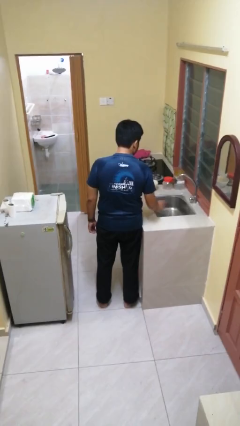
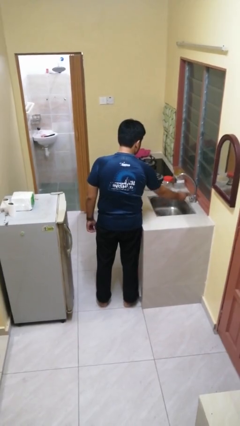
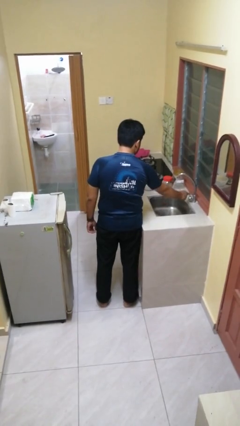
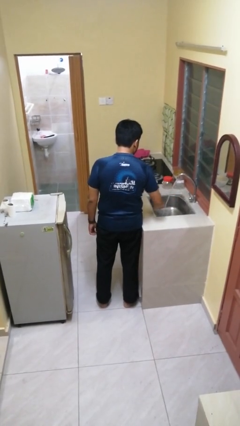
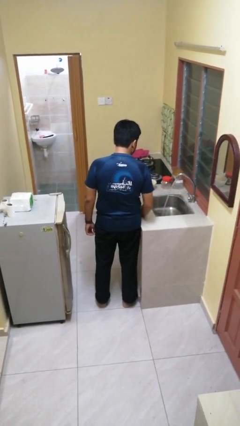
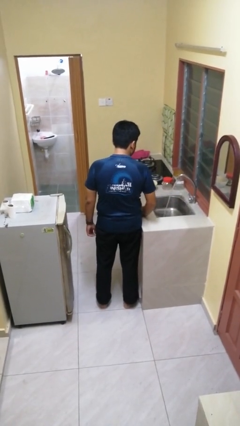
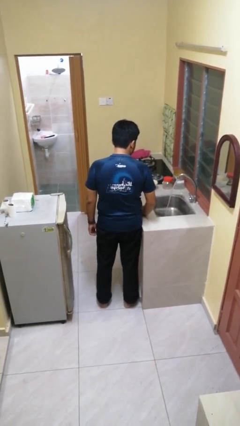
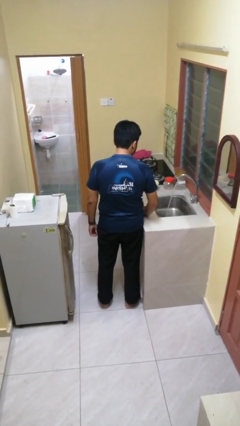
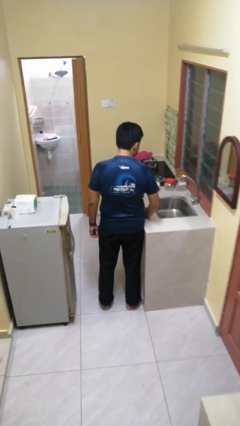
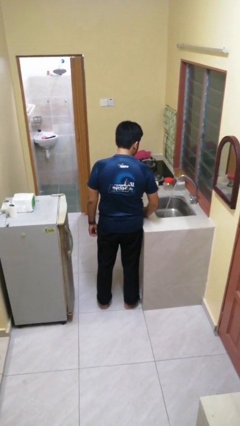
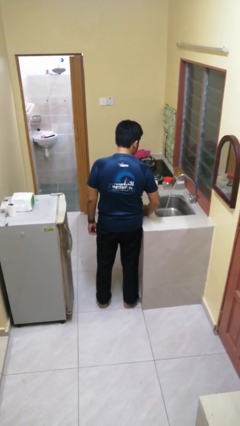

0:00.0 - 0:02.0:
person turns on faucet

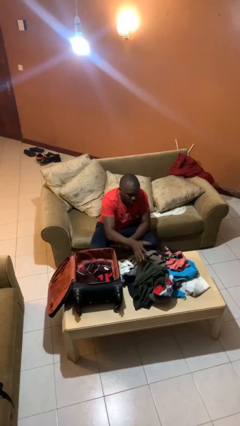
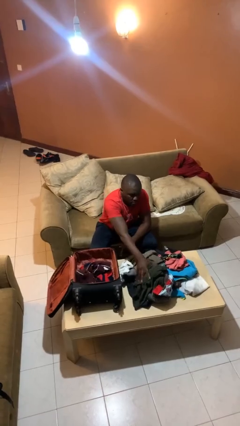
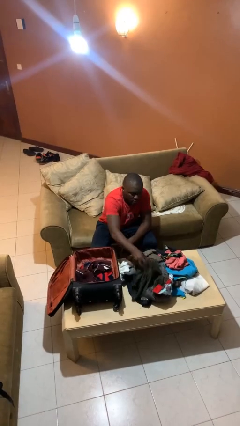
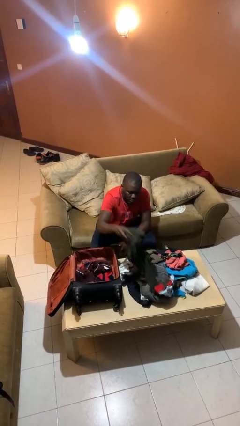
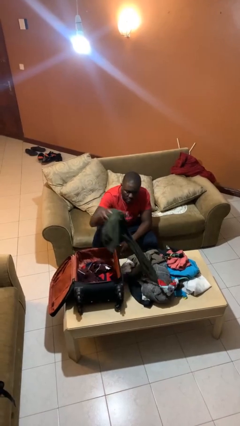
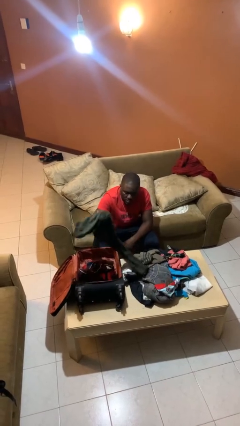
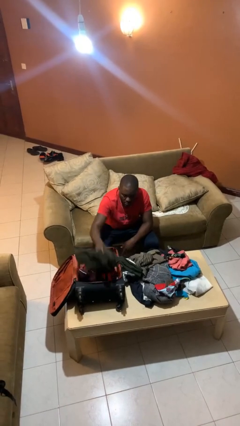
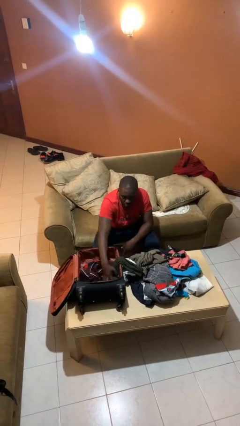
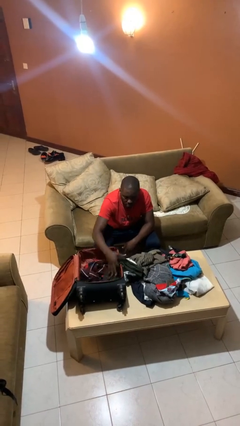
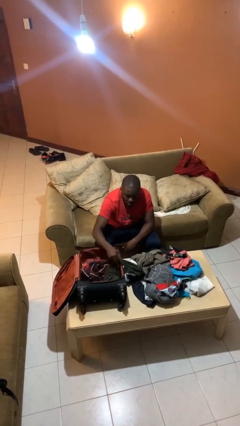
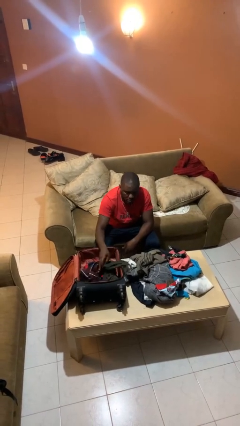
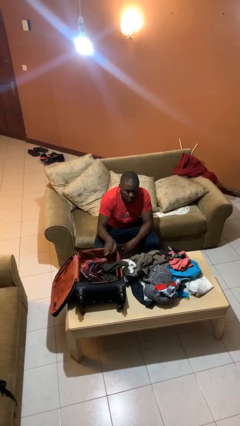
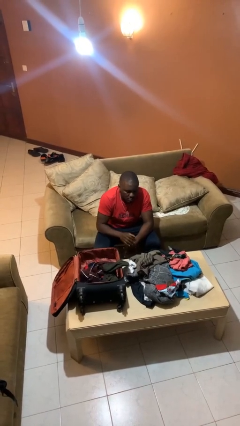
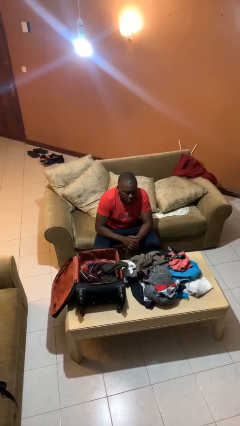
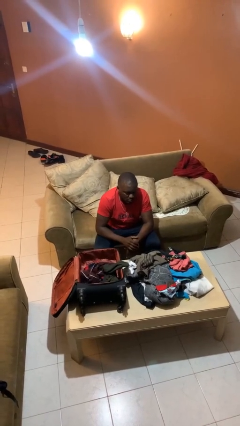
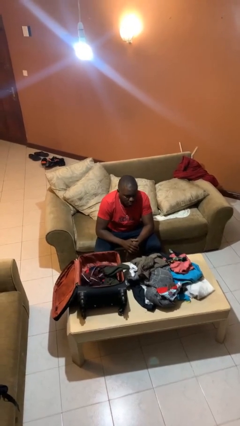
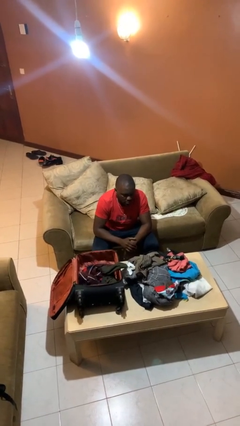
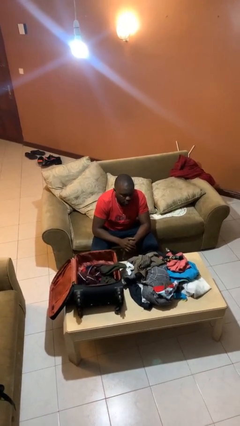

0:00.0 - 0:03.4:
person loads clothes into suitcase

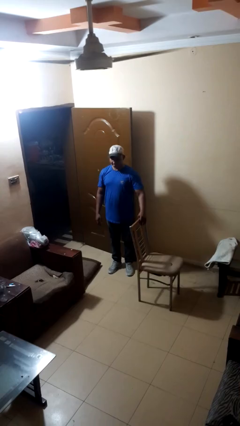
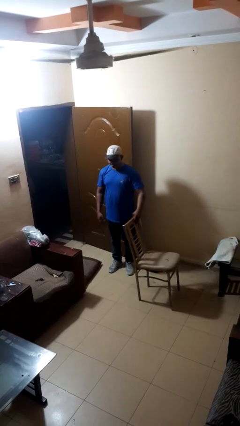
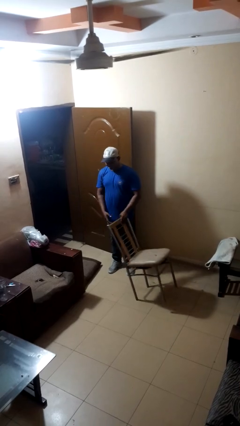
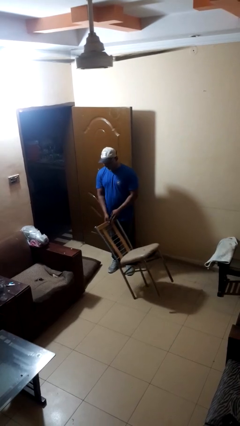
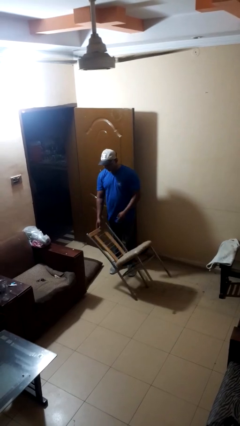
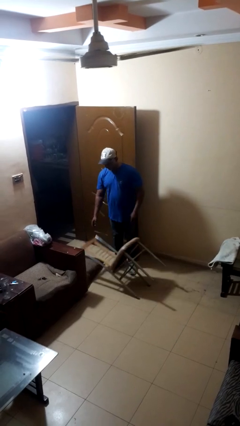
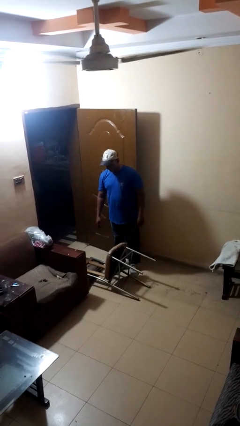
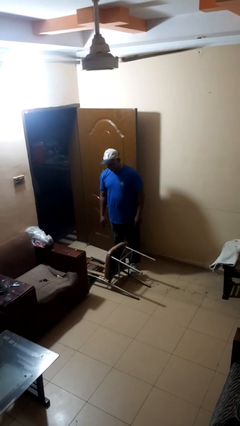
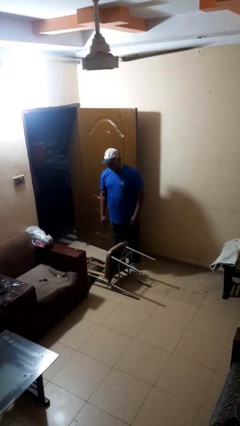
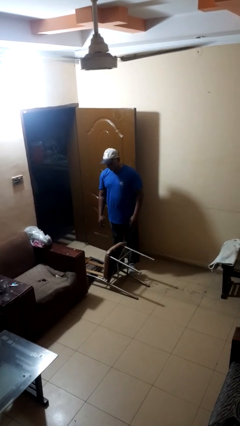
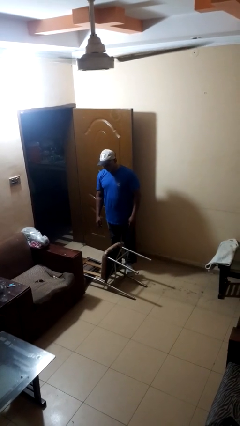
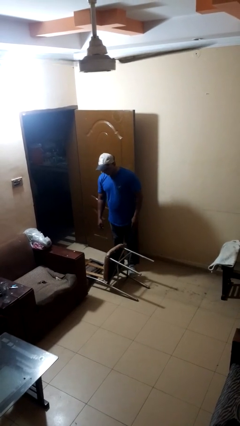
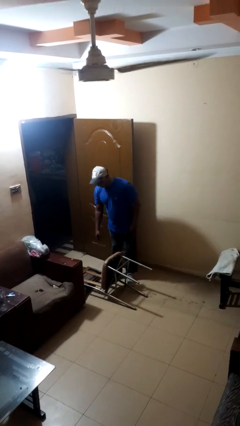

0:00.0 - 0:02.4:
person knocks over furniture

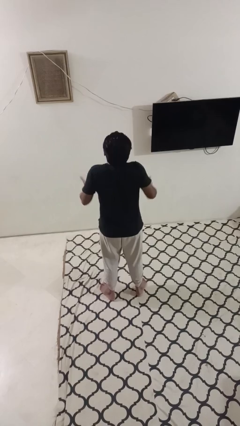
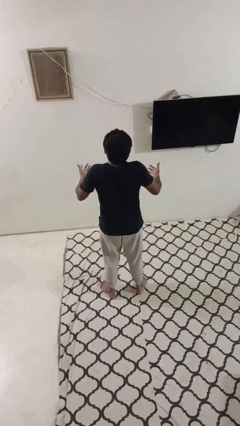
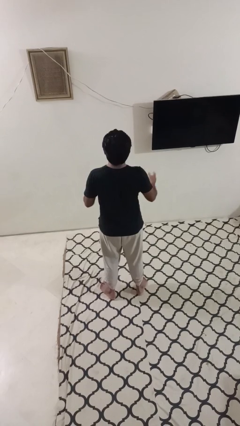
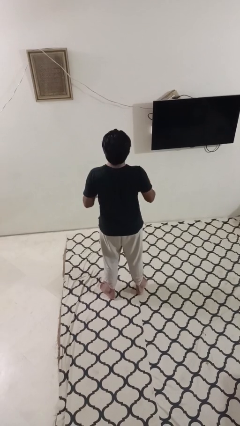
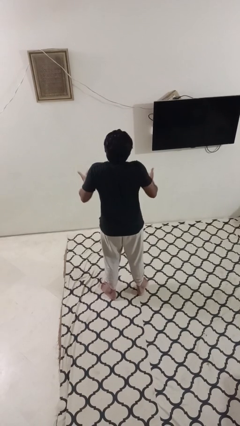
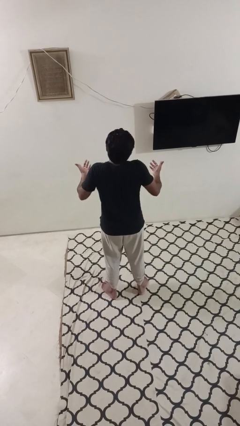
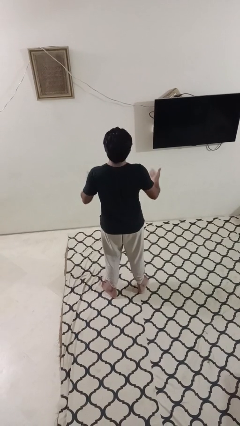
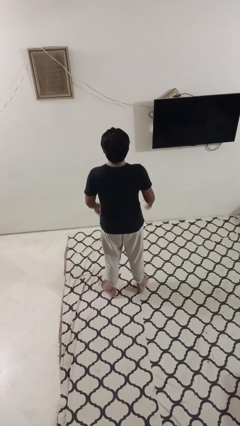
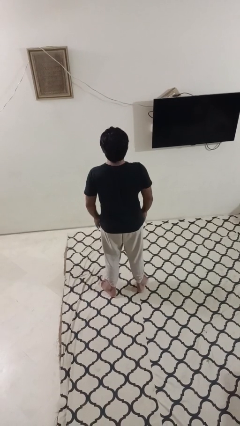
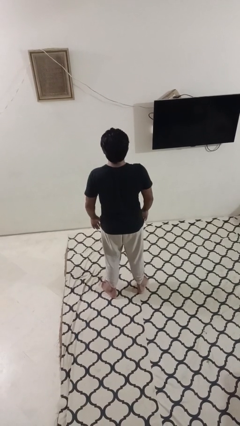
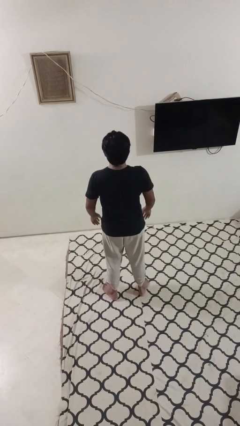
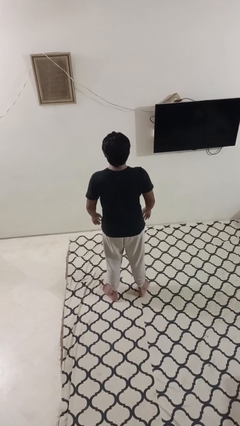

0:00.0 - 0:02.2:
person shrugs

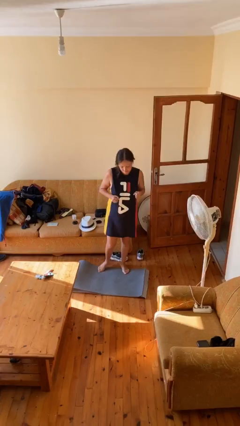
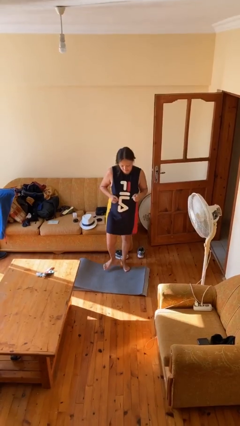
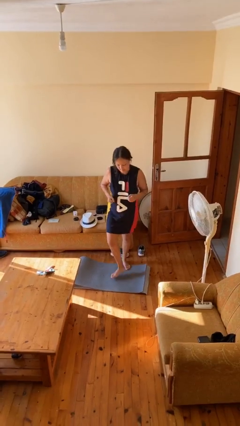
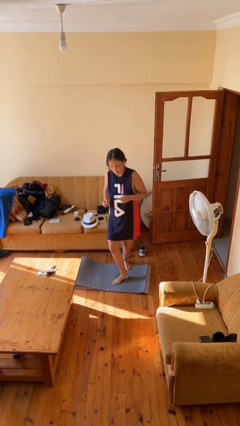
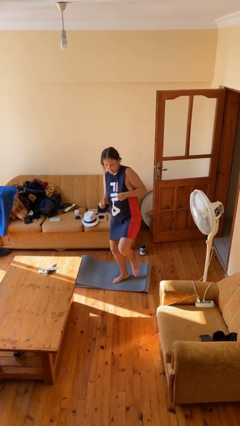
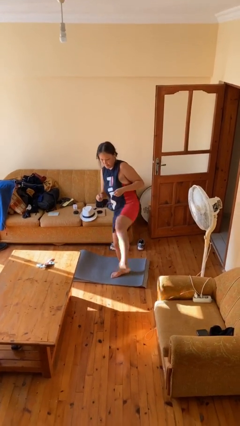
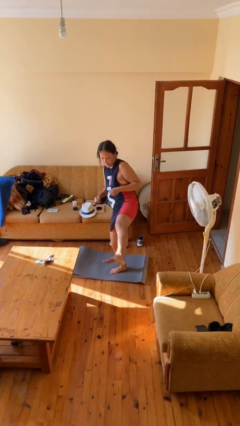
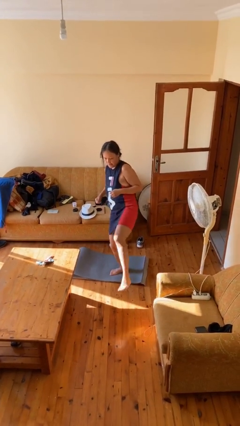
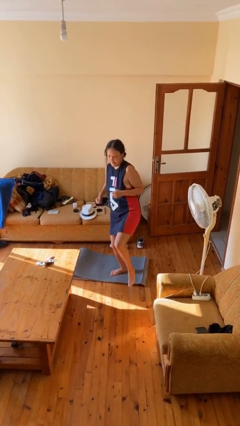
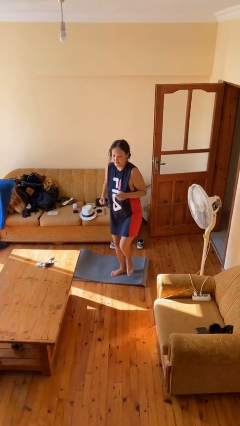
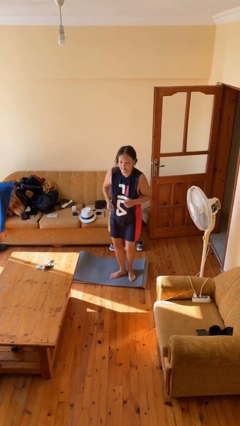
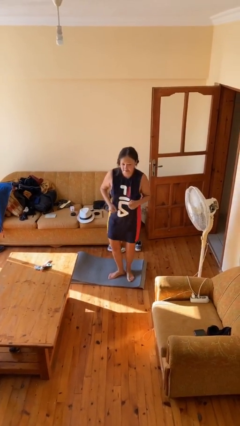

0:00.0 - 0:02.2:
person karate kicks

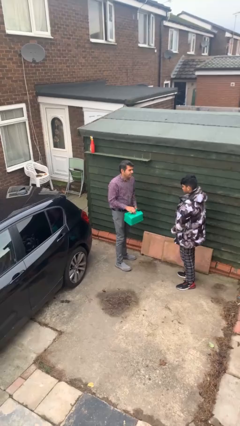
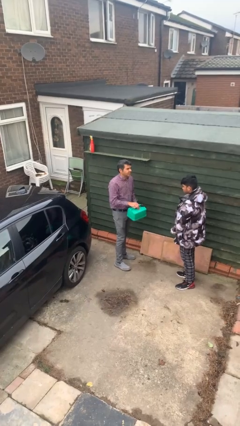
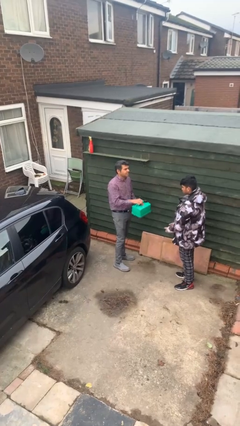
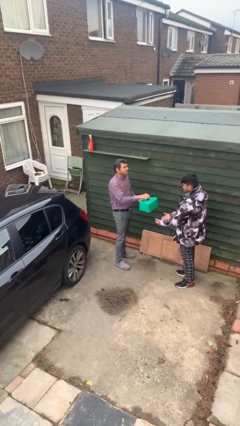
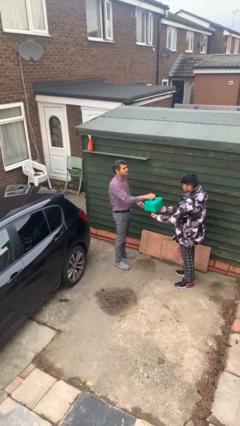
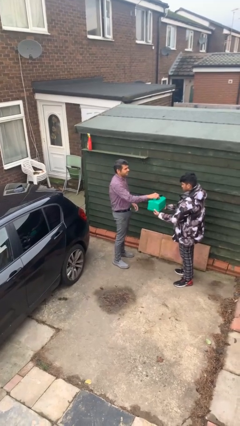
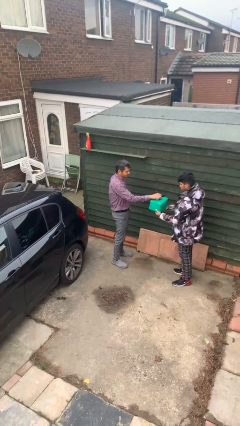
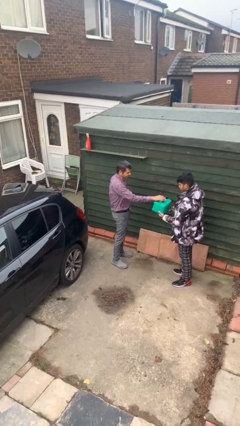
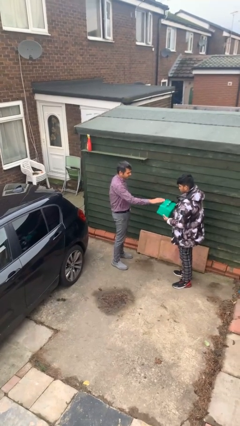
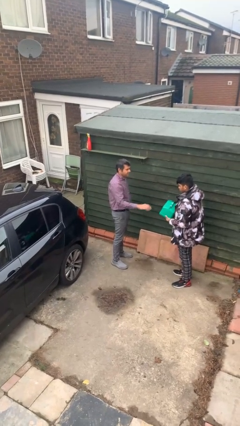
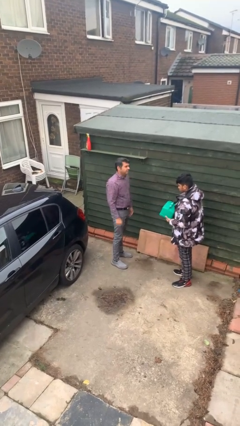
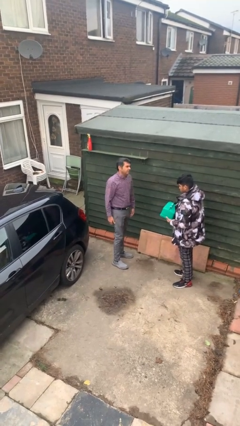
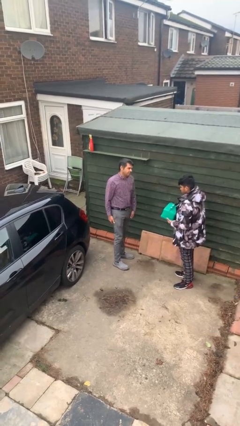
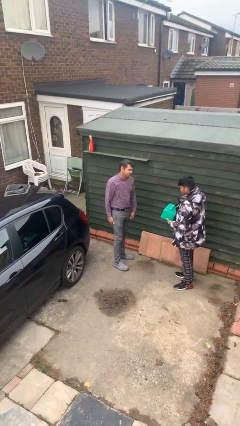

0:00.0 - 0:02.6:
person transfers object to person

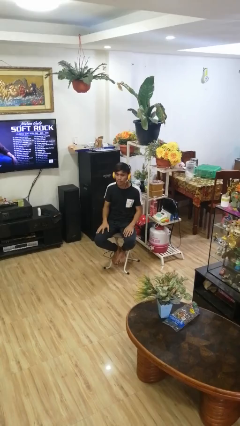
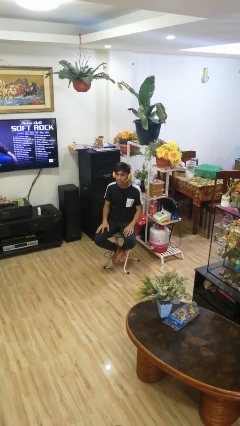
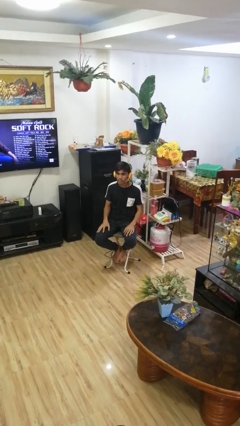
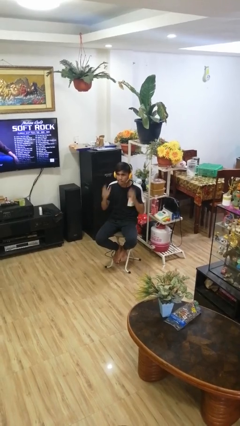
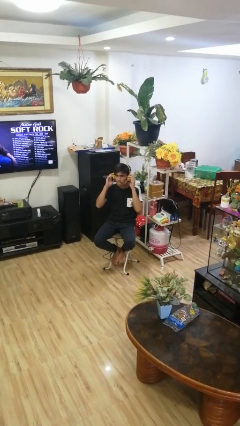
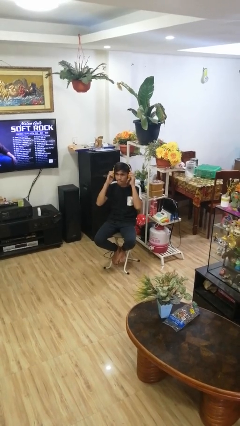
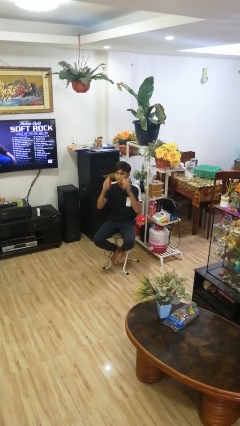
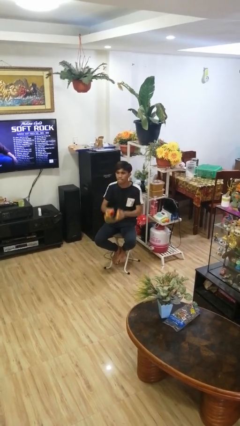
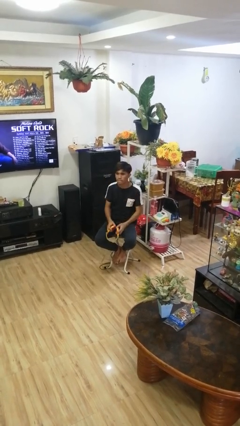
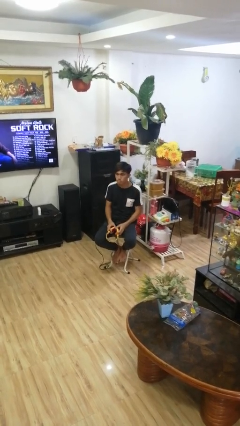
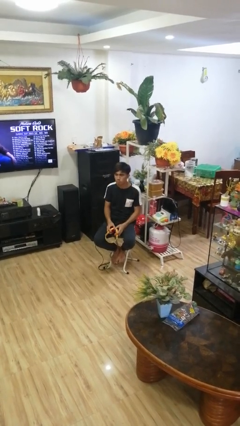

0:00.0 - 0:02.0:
person takes off headphones

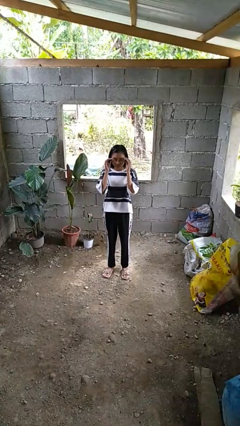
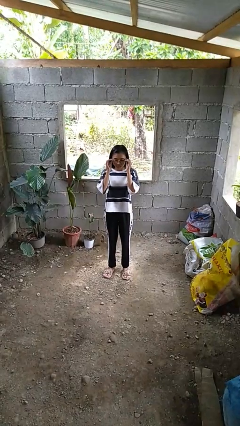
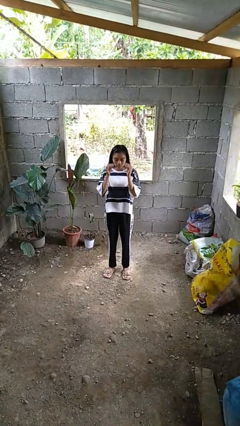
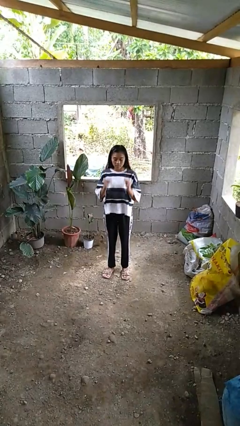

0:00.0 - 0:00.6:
person takes off glasses
